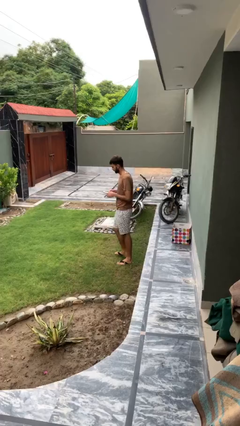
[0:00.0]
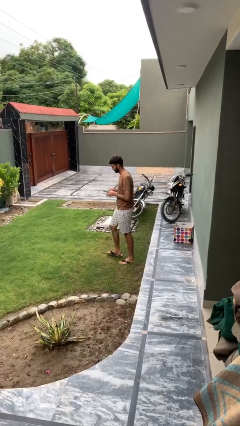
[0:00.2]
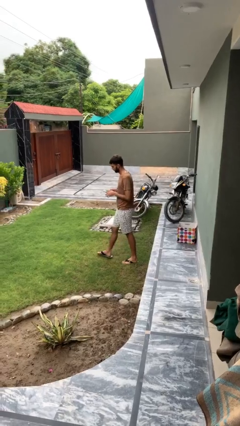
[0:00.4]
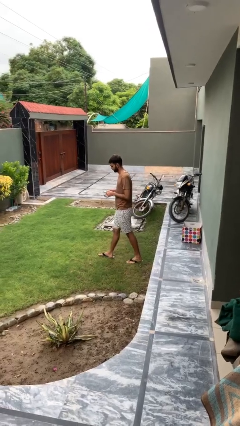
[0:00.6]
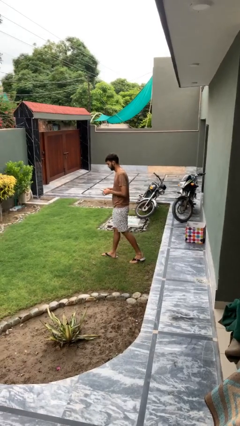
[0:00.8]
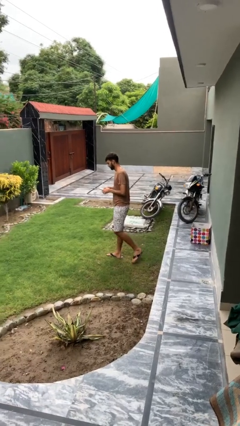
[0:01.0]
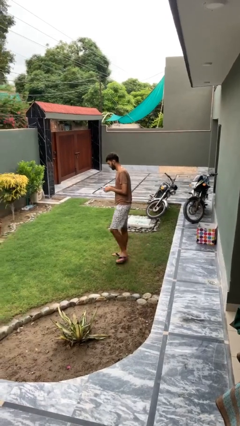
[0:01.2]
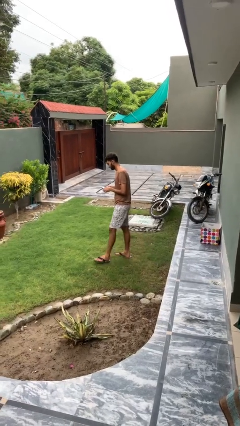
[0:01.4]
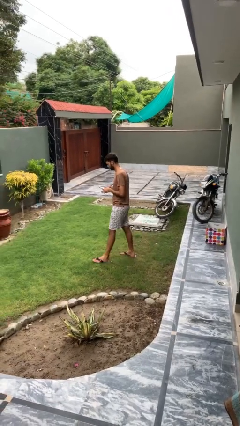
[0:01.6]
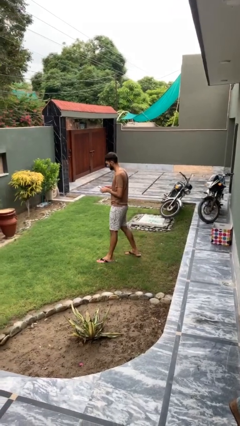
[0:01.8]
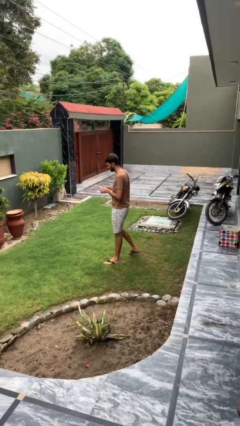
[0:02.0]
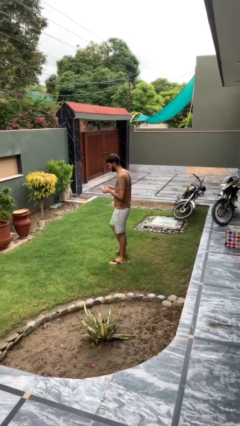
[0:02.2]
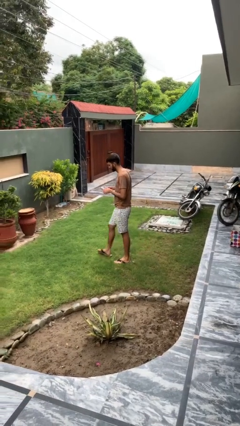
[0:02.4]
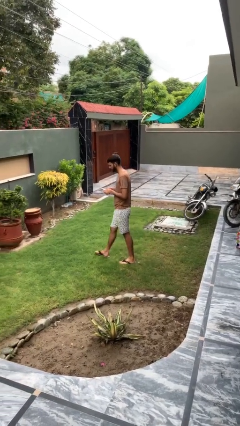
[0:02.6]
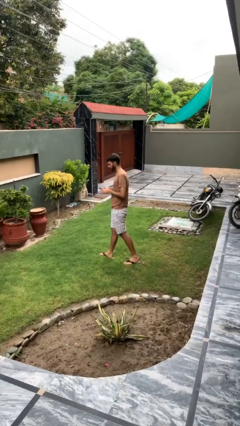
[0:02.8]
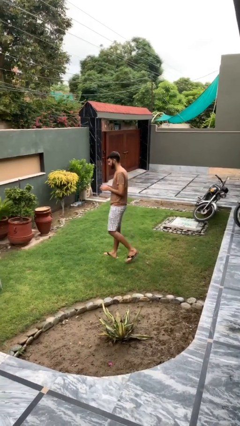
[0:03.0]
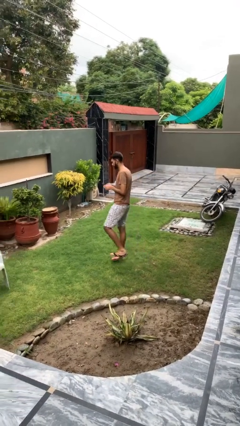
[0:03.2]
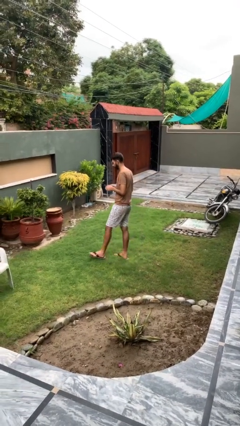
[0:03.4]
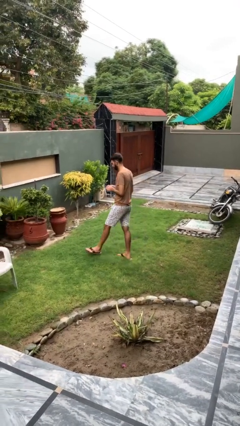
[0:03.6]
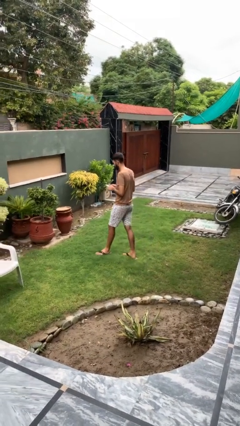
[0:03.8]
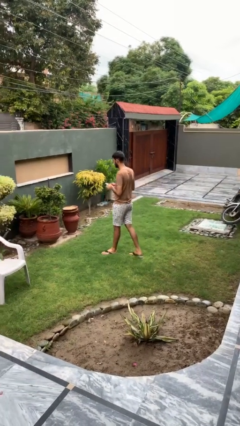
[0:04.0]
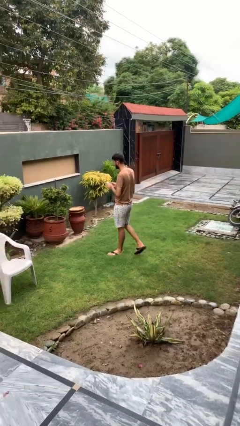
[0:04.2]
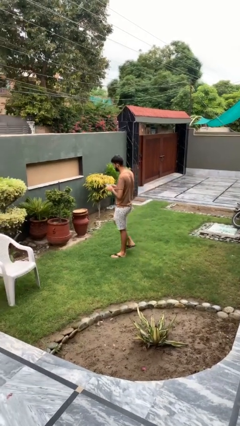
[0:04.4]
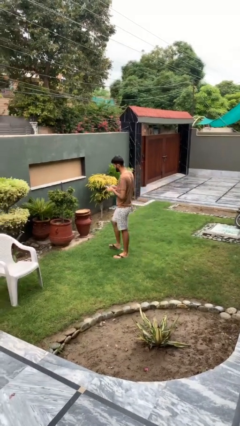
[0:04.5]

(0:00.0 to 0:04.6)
person texts on phone

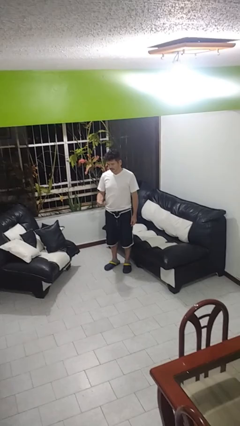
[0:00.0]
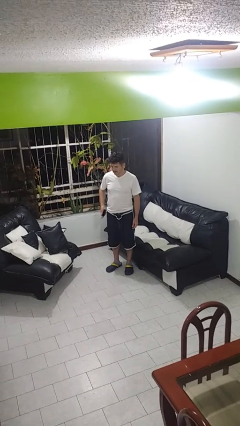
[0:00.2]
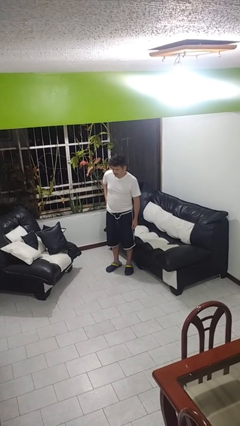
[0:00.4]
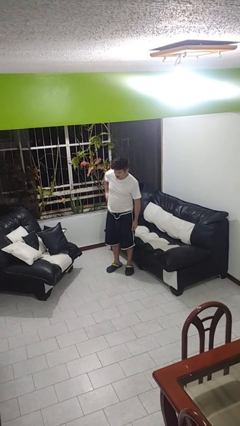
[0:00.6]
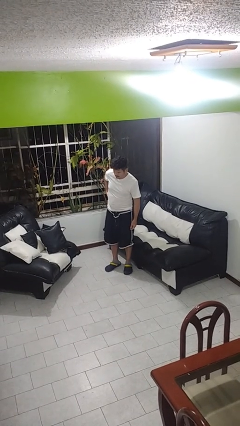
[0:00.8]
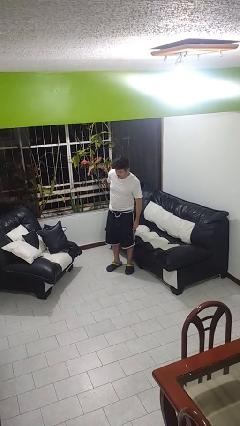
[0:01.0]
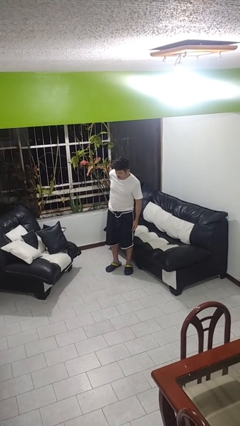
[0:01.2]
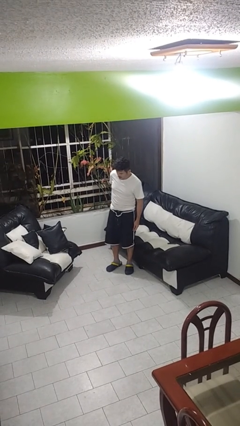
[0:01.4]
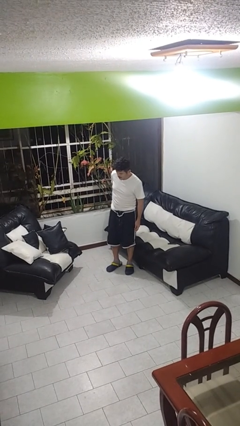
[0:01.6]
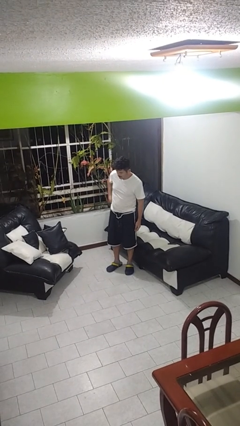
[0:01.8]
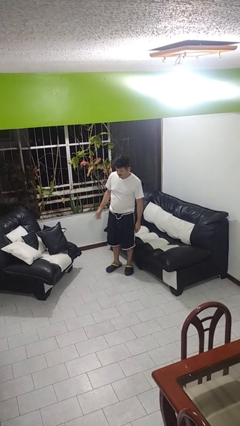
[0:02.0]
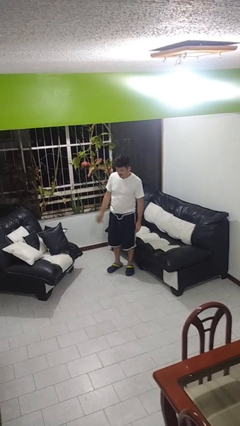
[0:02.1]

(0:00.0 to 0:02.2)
person puts phone into pocket

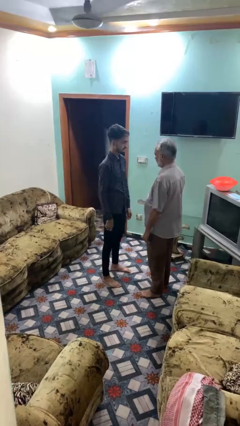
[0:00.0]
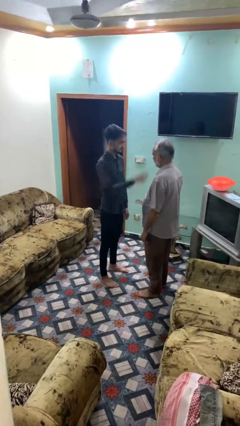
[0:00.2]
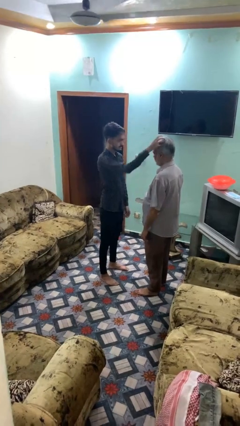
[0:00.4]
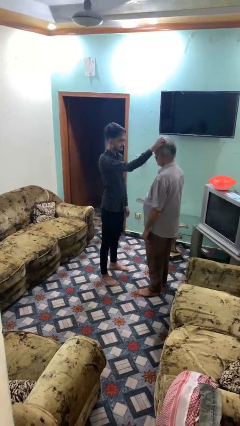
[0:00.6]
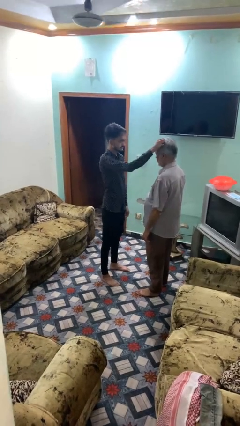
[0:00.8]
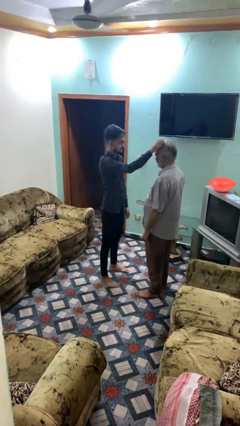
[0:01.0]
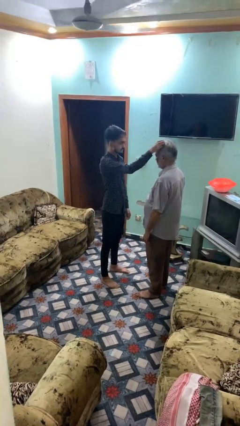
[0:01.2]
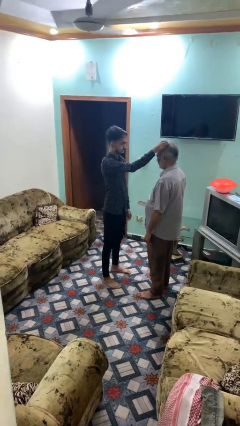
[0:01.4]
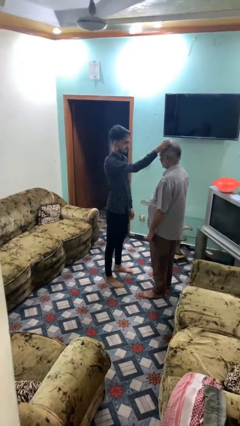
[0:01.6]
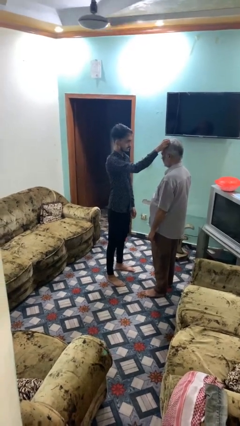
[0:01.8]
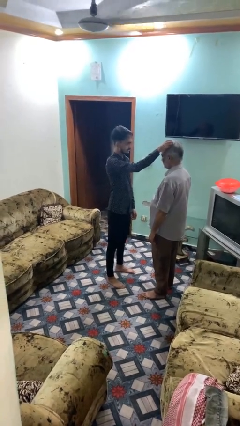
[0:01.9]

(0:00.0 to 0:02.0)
person grabs person by hair

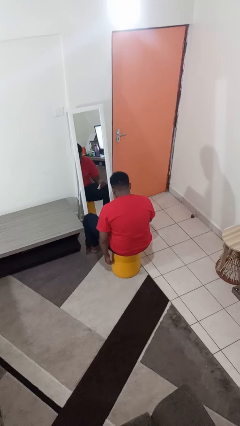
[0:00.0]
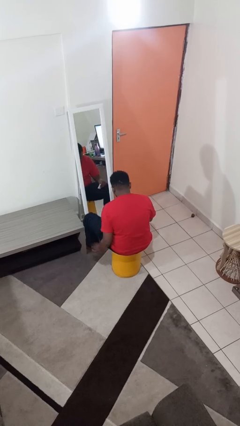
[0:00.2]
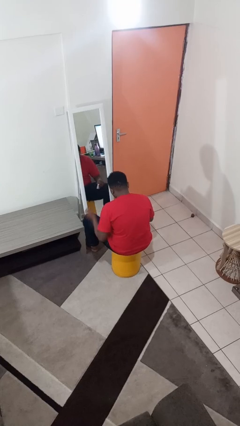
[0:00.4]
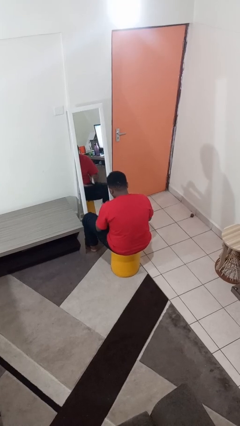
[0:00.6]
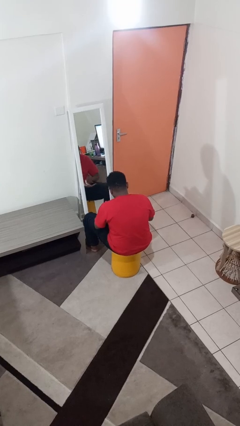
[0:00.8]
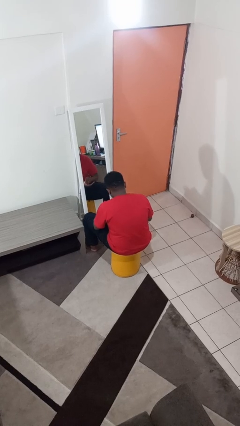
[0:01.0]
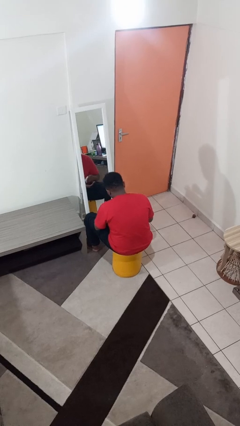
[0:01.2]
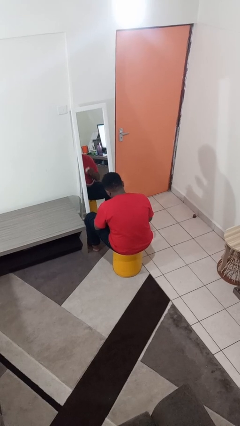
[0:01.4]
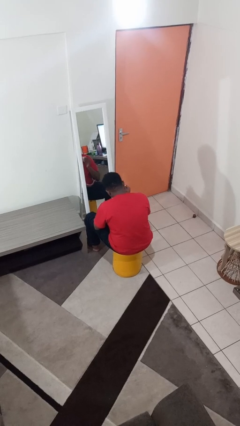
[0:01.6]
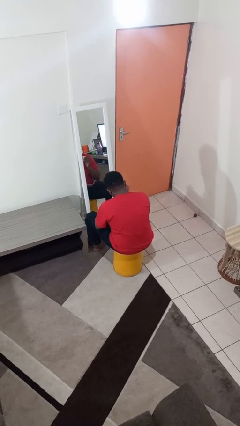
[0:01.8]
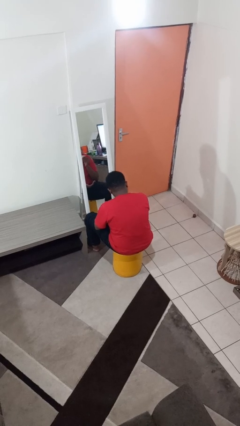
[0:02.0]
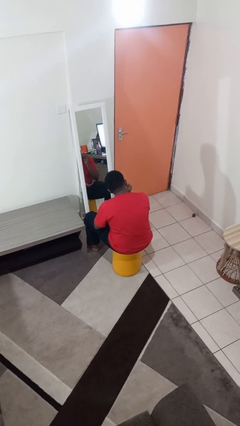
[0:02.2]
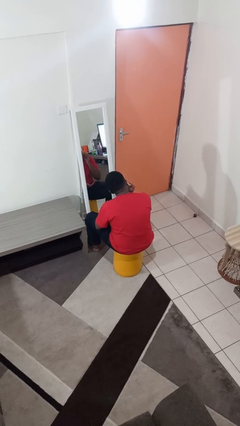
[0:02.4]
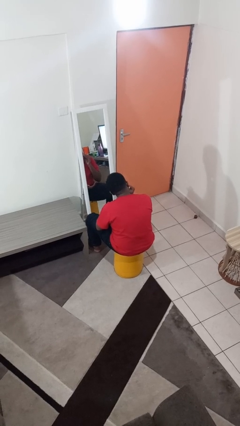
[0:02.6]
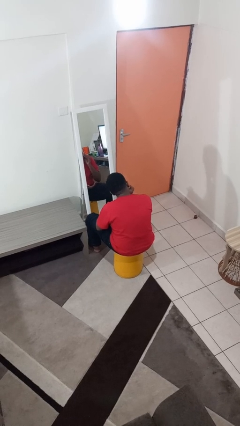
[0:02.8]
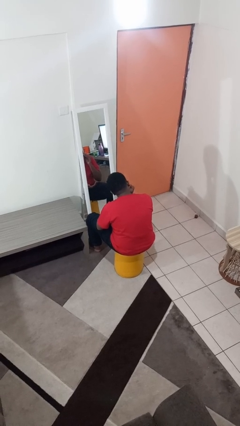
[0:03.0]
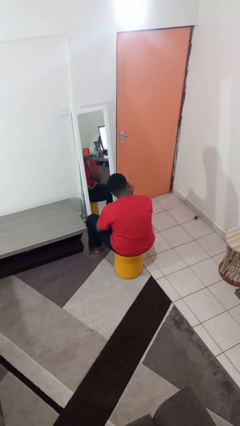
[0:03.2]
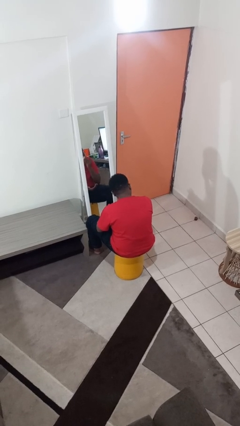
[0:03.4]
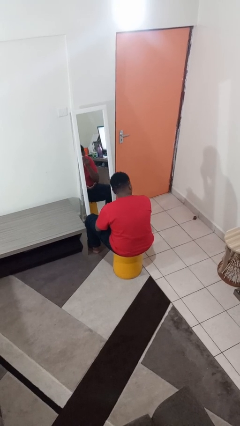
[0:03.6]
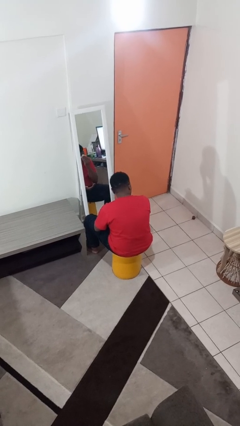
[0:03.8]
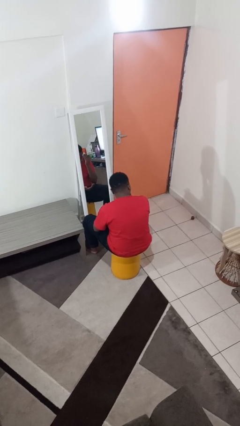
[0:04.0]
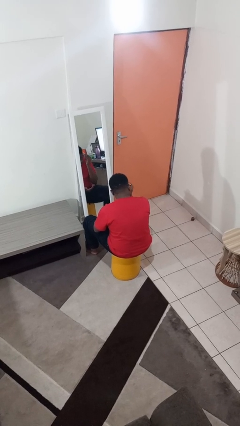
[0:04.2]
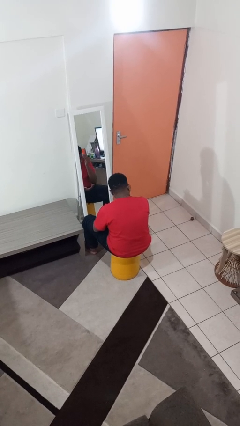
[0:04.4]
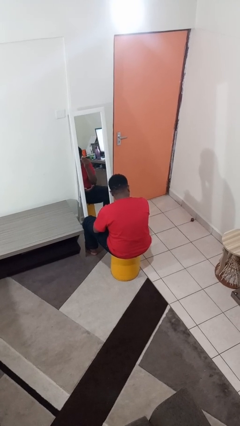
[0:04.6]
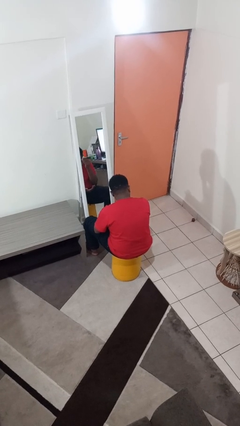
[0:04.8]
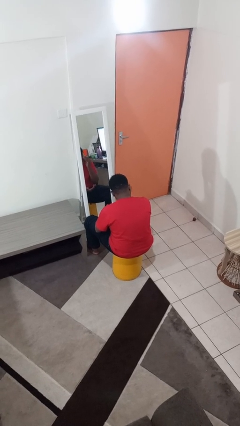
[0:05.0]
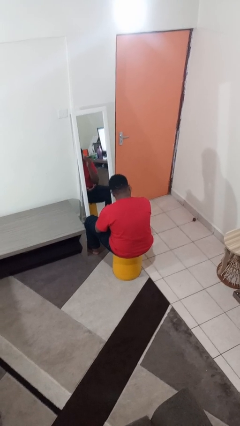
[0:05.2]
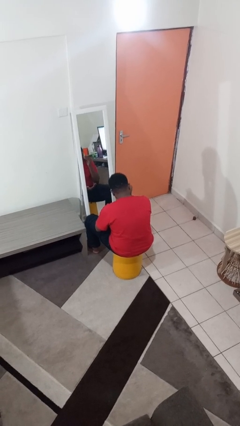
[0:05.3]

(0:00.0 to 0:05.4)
person applies foundation makeup

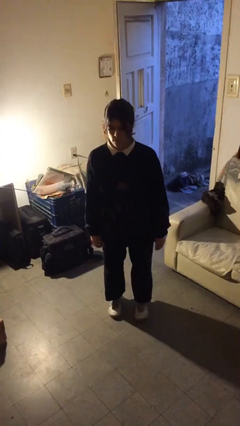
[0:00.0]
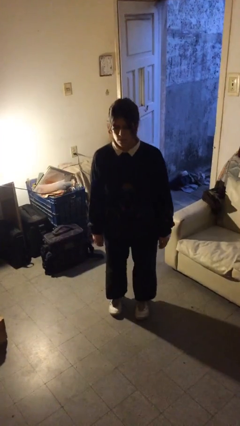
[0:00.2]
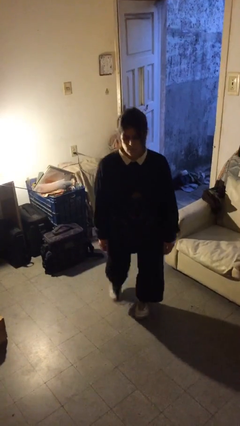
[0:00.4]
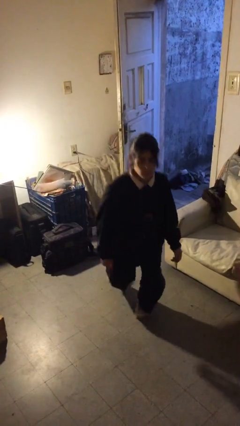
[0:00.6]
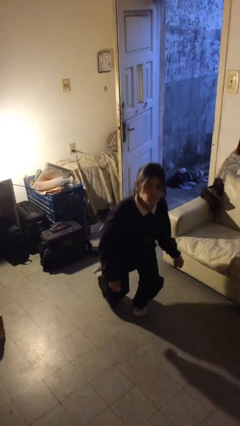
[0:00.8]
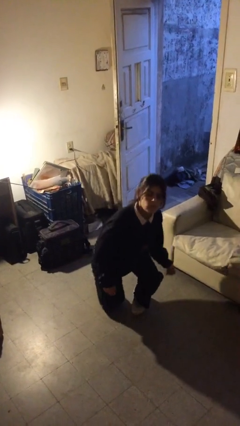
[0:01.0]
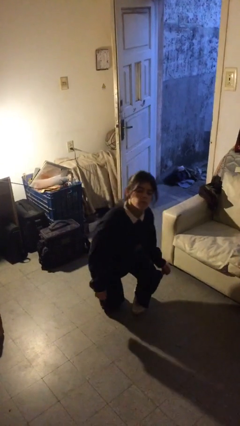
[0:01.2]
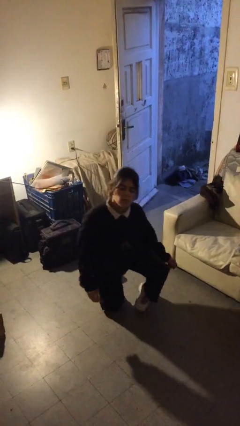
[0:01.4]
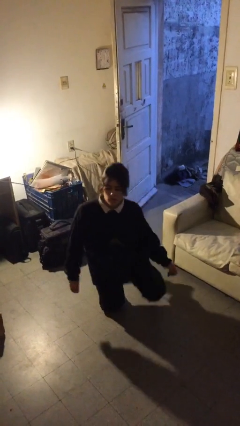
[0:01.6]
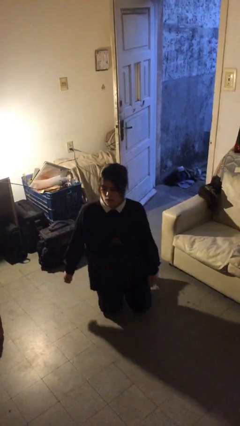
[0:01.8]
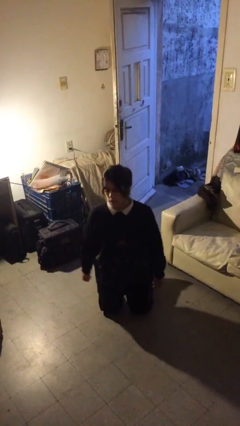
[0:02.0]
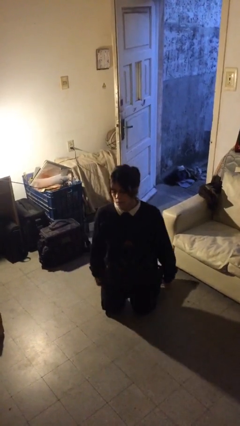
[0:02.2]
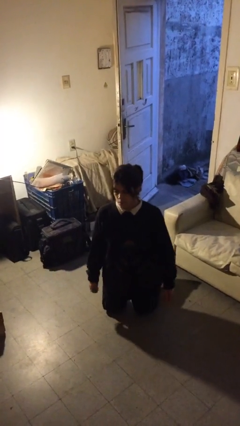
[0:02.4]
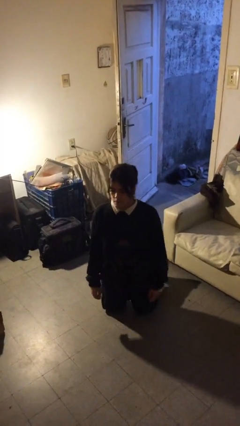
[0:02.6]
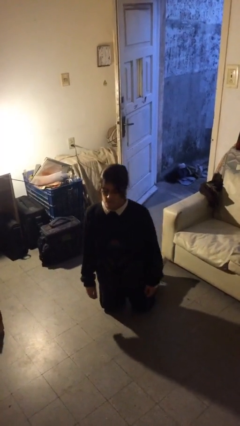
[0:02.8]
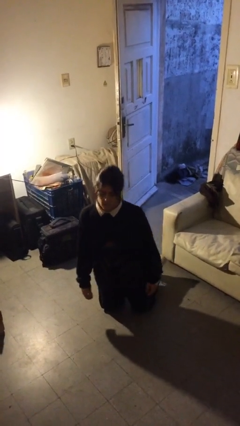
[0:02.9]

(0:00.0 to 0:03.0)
person kneels
